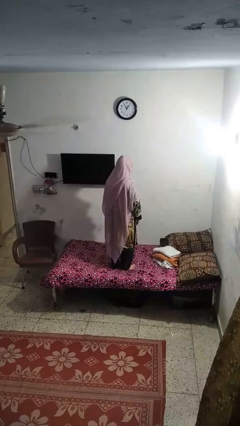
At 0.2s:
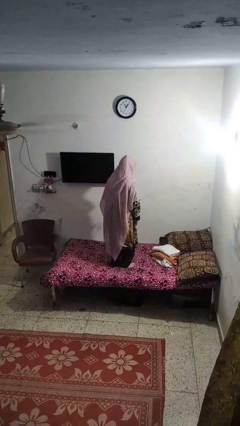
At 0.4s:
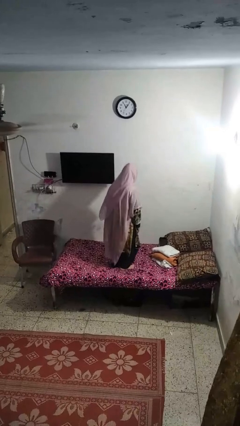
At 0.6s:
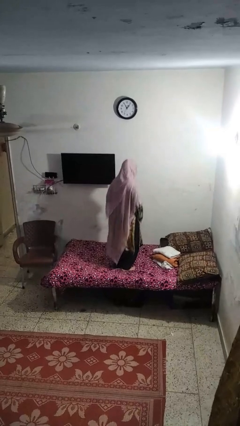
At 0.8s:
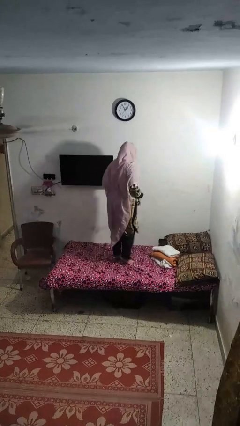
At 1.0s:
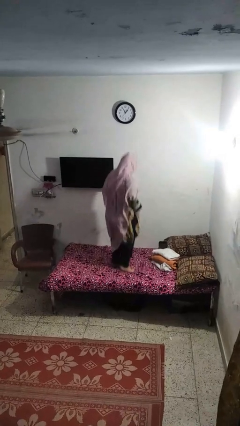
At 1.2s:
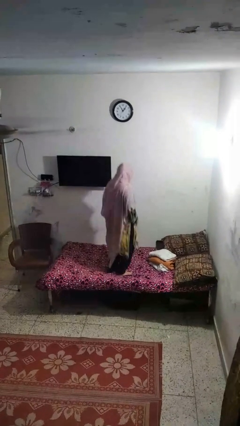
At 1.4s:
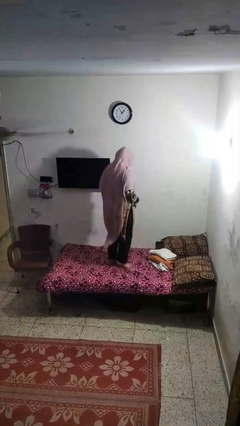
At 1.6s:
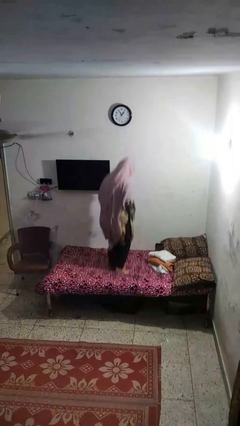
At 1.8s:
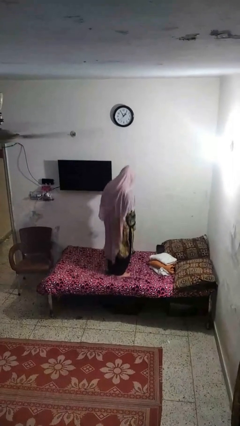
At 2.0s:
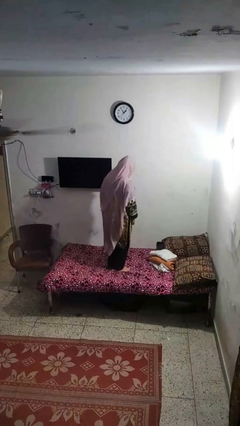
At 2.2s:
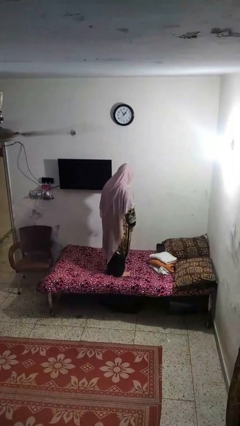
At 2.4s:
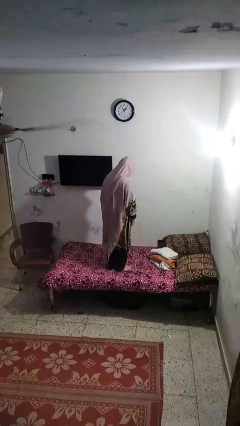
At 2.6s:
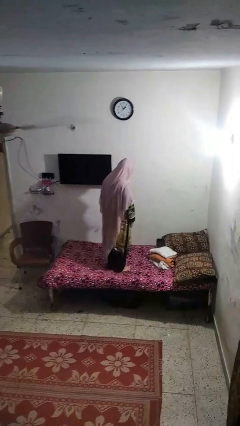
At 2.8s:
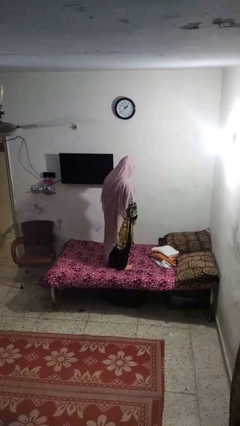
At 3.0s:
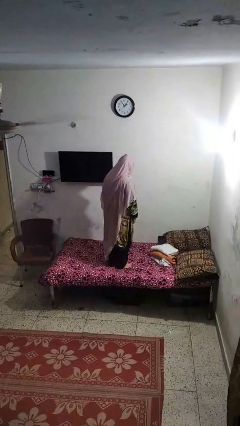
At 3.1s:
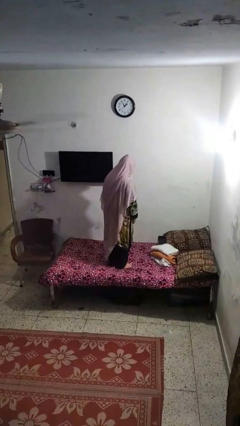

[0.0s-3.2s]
person jumps on bed

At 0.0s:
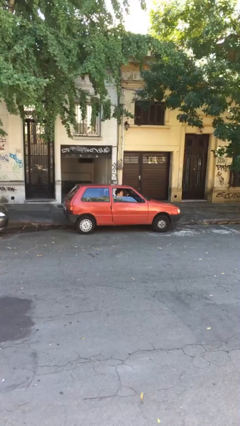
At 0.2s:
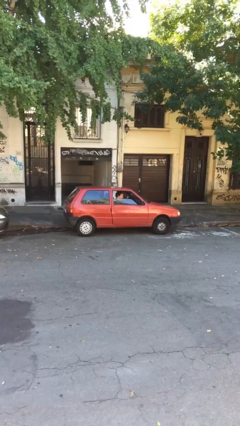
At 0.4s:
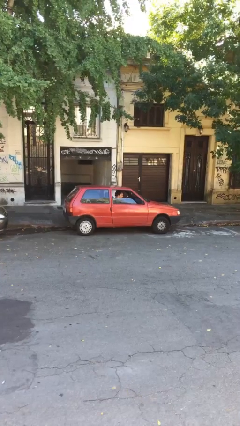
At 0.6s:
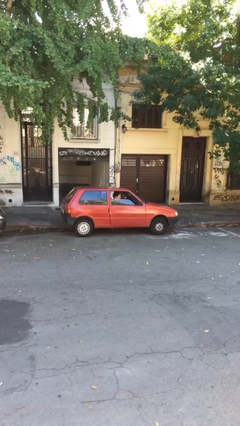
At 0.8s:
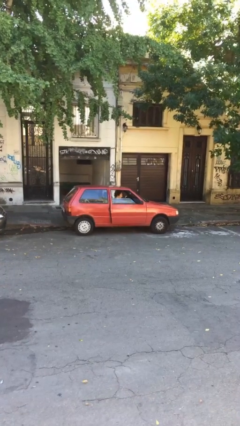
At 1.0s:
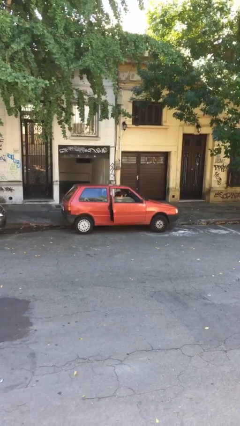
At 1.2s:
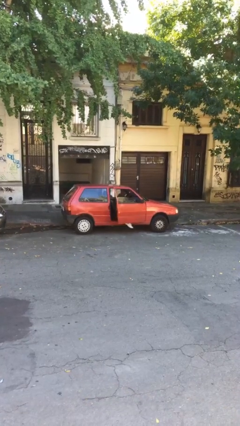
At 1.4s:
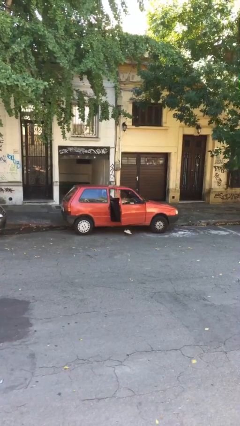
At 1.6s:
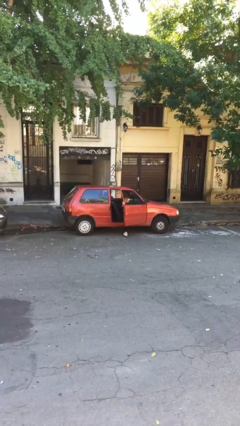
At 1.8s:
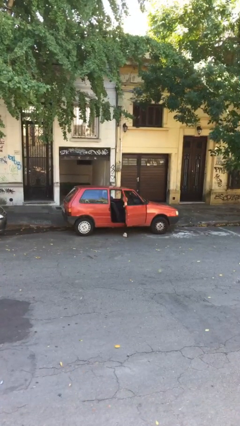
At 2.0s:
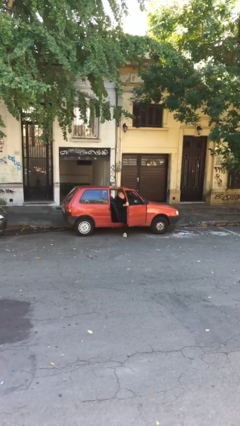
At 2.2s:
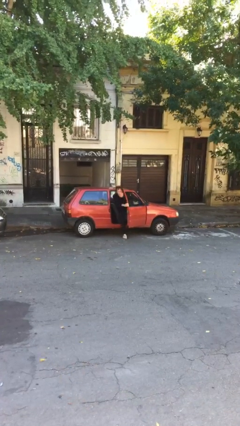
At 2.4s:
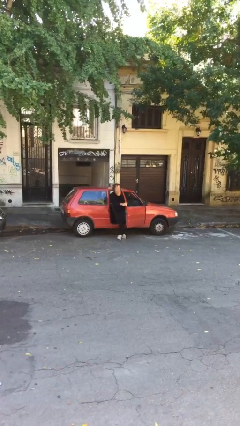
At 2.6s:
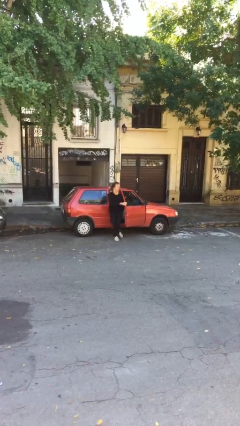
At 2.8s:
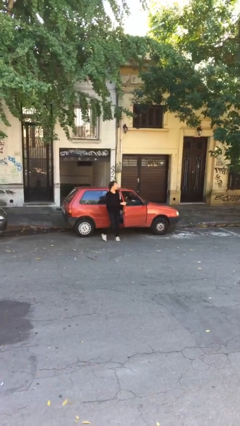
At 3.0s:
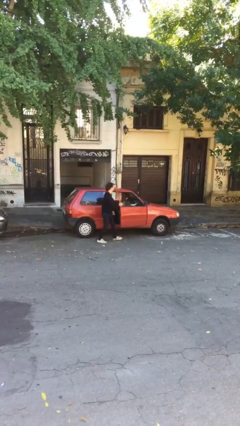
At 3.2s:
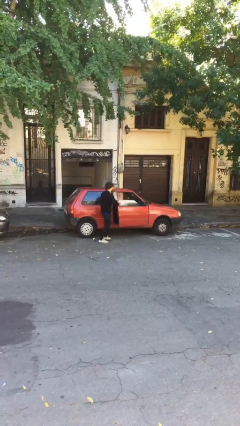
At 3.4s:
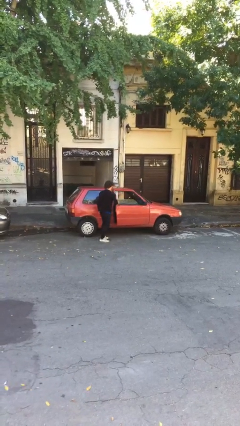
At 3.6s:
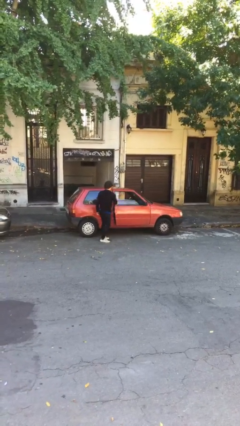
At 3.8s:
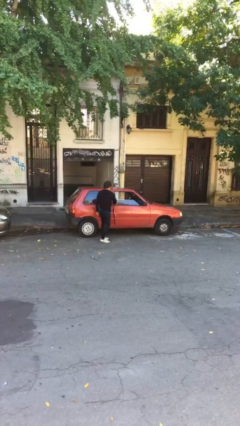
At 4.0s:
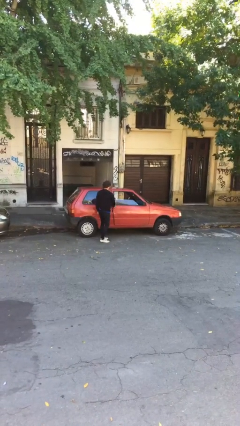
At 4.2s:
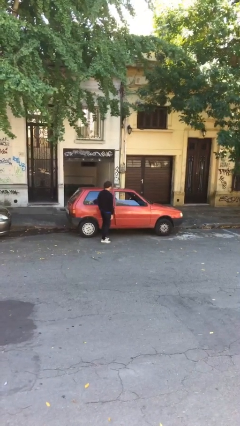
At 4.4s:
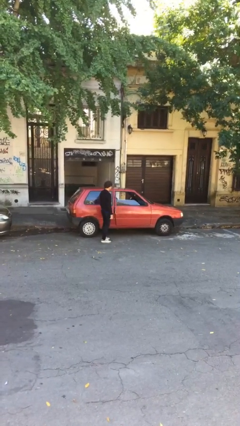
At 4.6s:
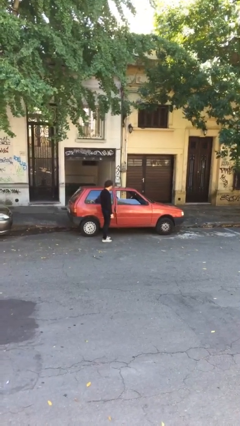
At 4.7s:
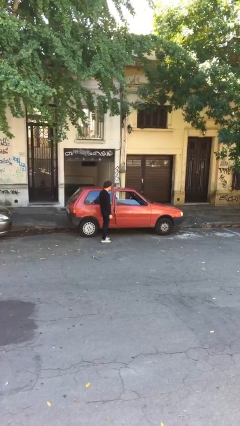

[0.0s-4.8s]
car drops off person

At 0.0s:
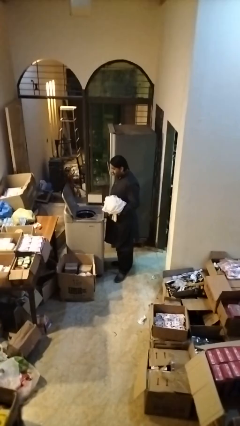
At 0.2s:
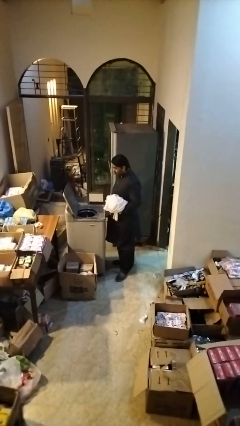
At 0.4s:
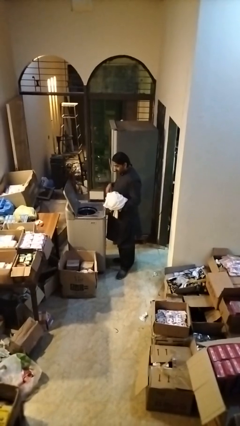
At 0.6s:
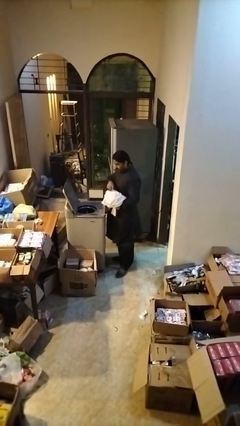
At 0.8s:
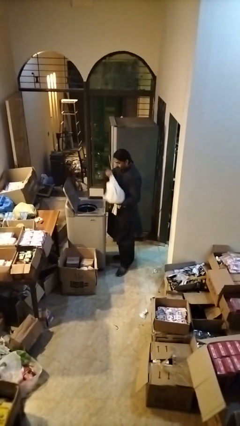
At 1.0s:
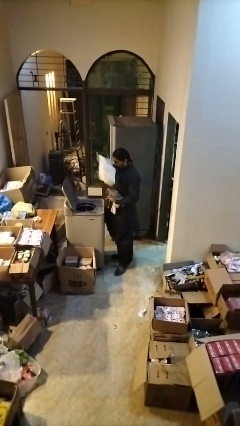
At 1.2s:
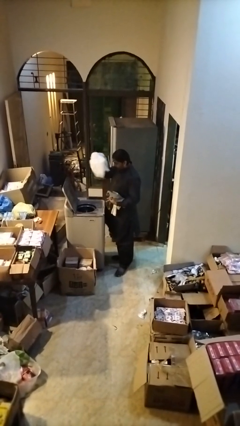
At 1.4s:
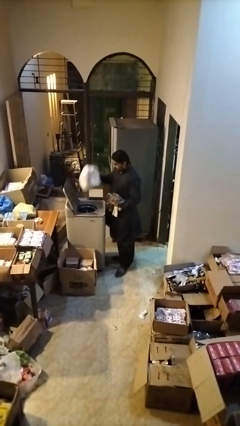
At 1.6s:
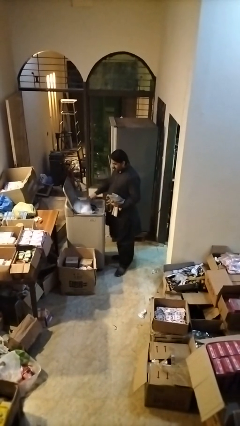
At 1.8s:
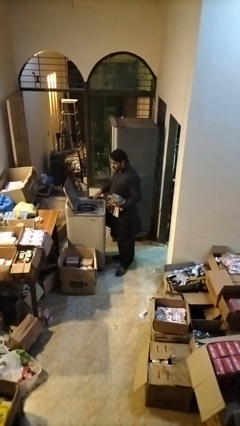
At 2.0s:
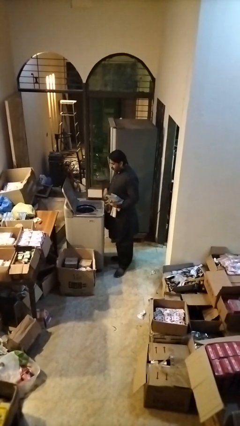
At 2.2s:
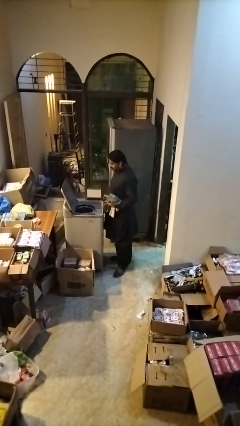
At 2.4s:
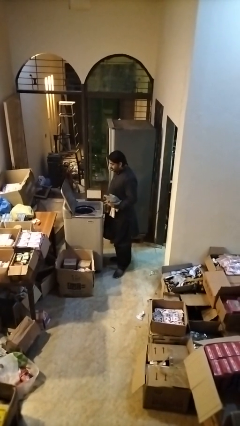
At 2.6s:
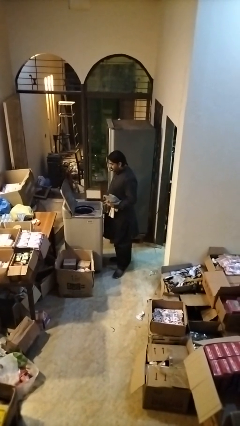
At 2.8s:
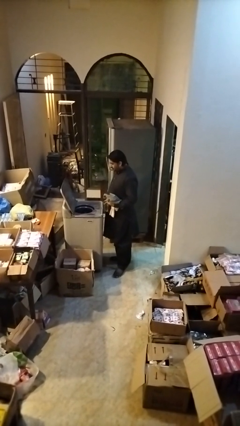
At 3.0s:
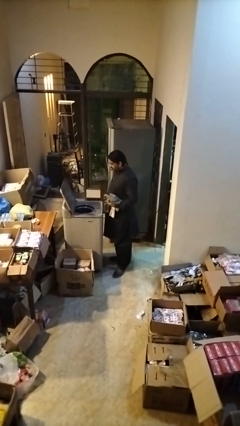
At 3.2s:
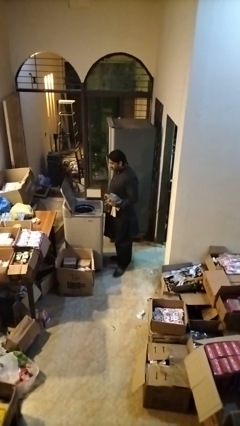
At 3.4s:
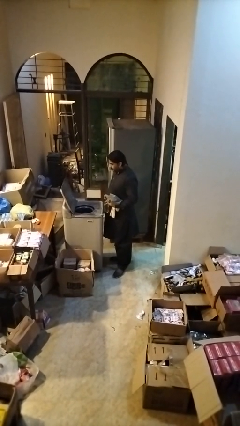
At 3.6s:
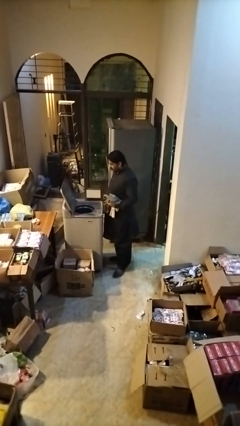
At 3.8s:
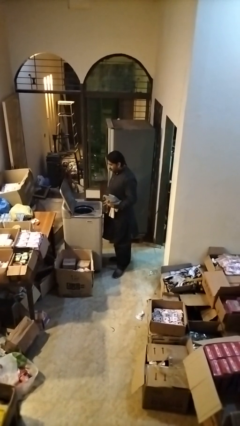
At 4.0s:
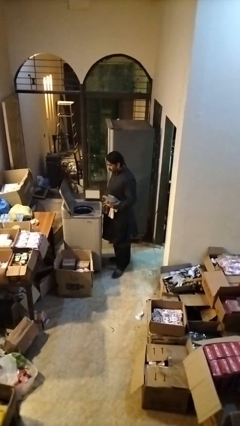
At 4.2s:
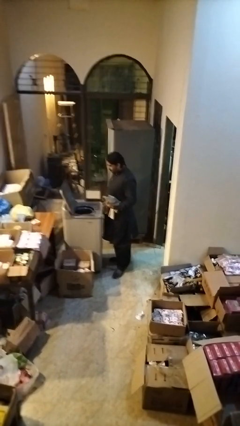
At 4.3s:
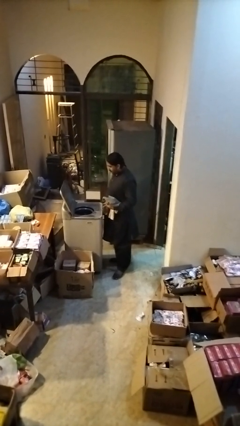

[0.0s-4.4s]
person loads dryer

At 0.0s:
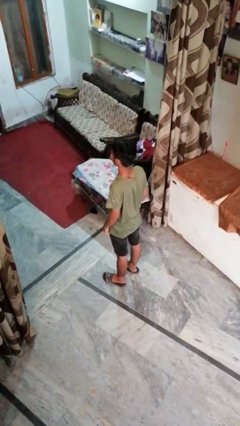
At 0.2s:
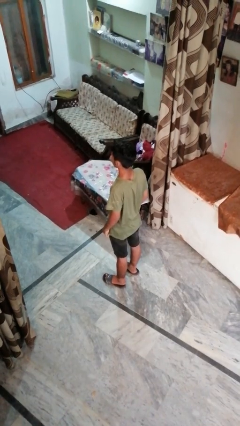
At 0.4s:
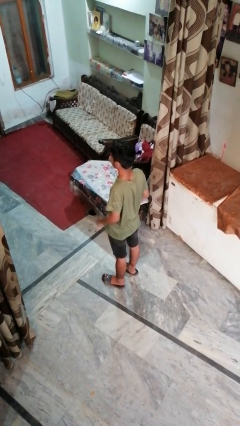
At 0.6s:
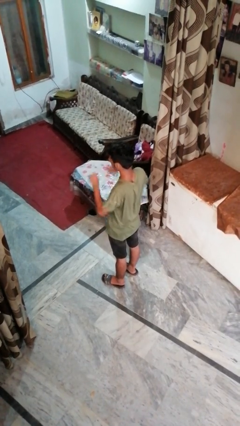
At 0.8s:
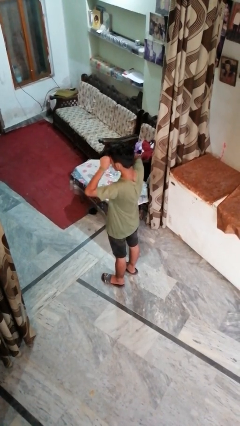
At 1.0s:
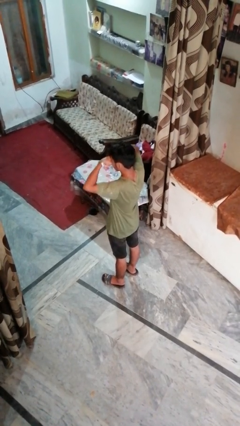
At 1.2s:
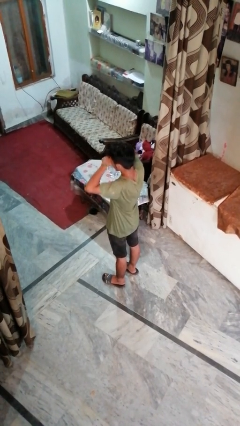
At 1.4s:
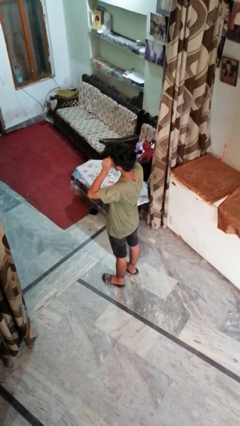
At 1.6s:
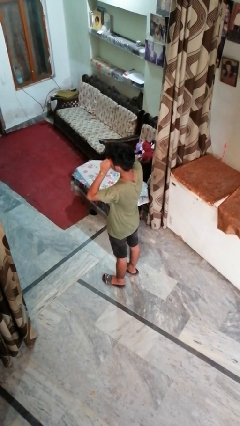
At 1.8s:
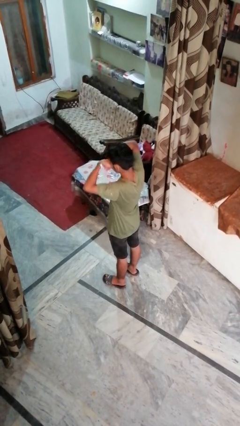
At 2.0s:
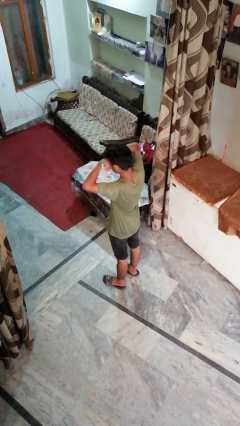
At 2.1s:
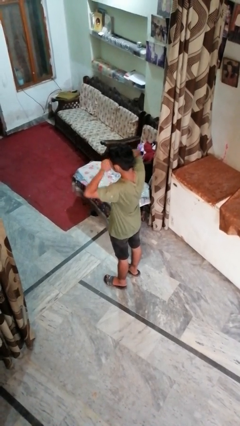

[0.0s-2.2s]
person rubs eyes

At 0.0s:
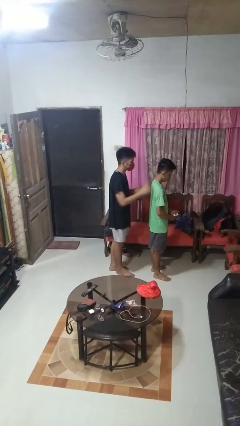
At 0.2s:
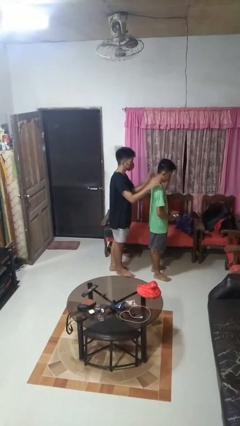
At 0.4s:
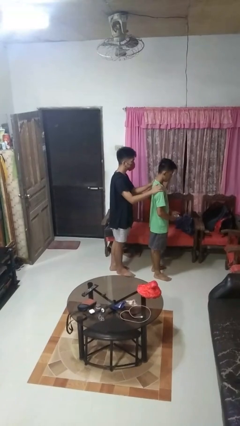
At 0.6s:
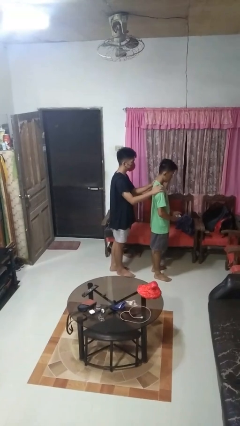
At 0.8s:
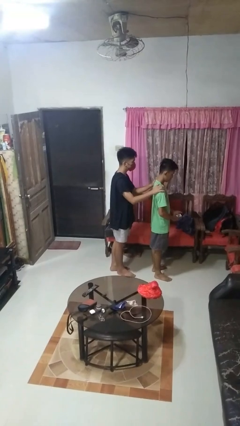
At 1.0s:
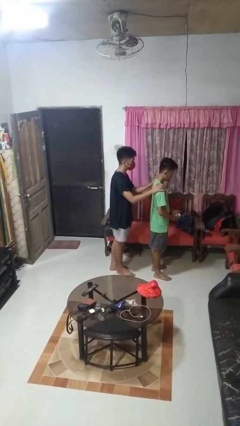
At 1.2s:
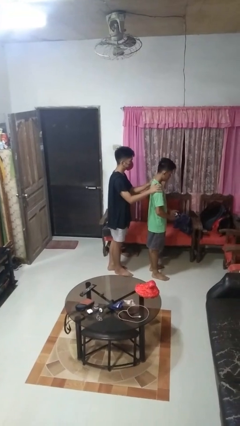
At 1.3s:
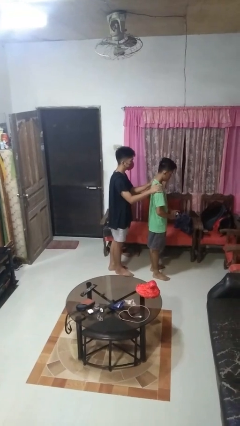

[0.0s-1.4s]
person grabs person by shoulder

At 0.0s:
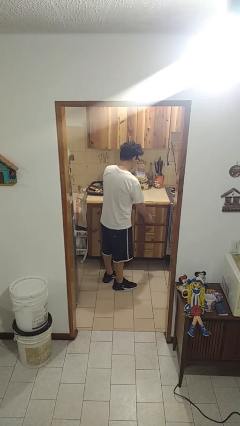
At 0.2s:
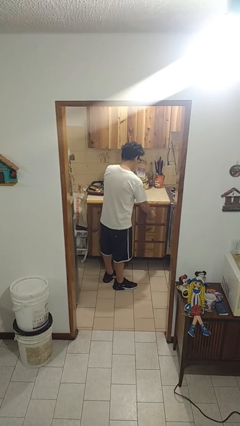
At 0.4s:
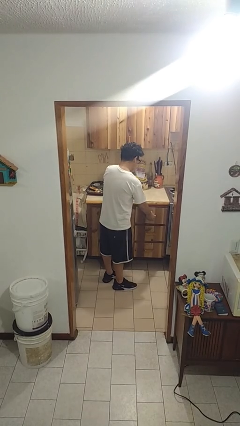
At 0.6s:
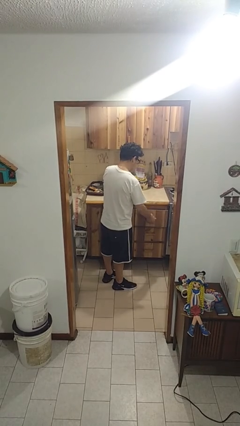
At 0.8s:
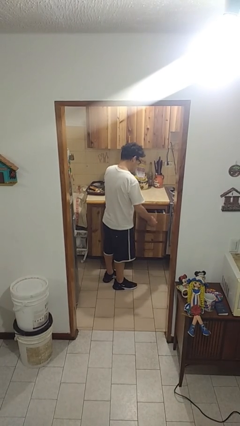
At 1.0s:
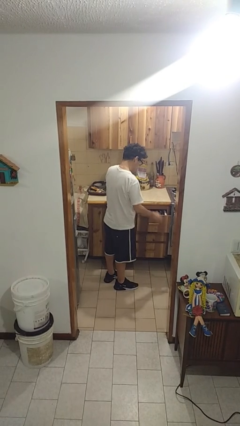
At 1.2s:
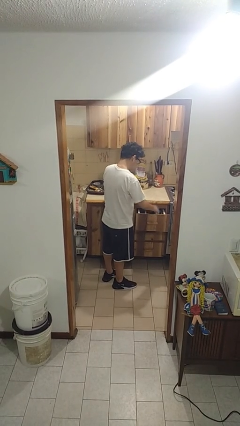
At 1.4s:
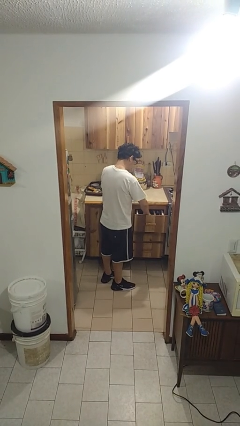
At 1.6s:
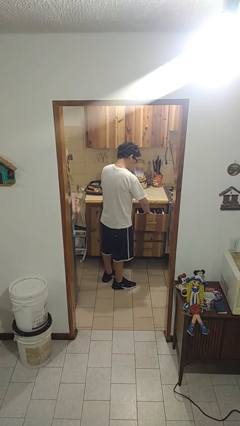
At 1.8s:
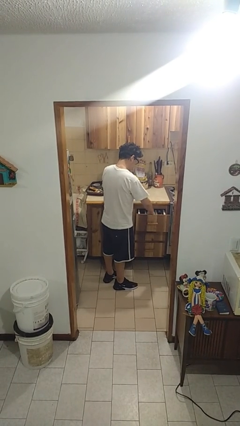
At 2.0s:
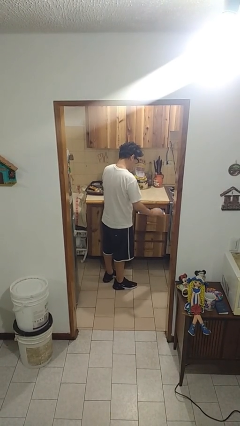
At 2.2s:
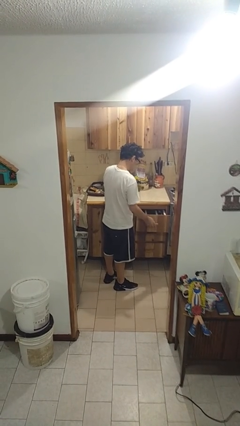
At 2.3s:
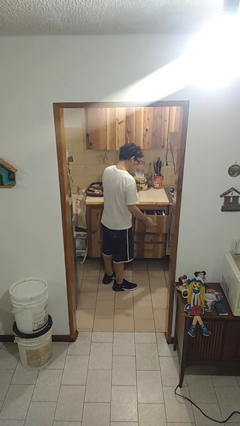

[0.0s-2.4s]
person searches in kitchen drawer
